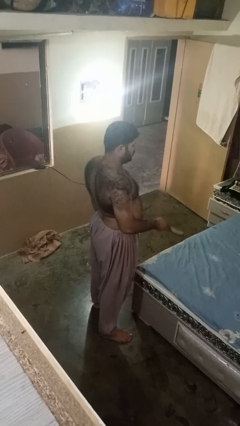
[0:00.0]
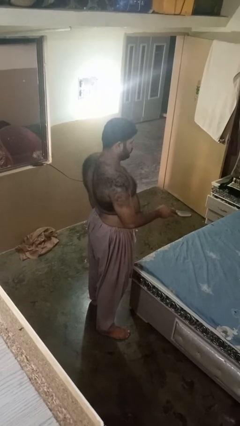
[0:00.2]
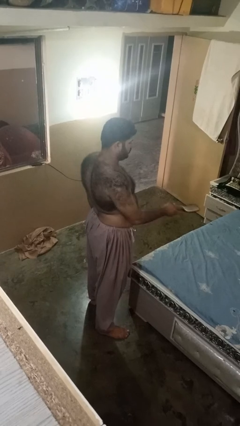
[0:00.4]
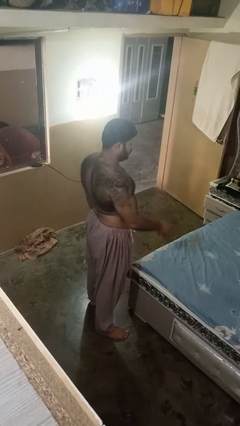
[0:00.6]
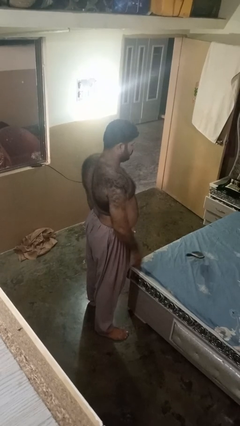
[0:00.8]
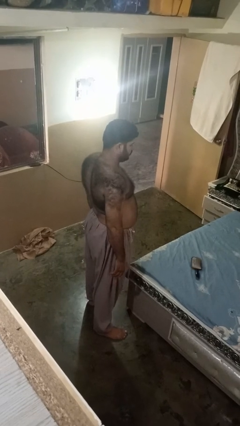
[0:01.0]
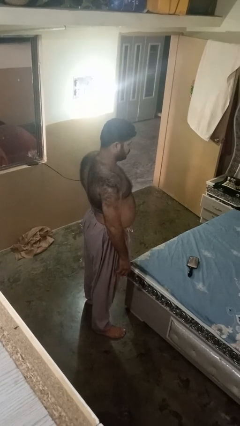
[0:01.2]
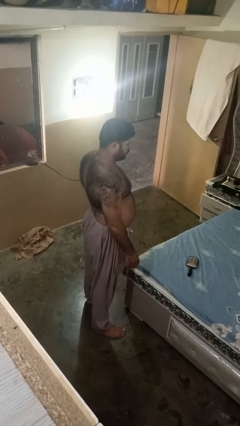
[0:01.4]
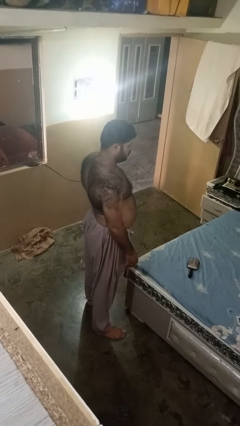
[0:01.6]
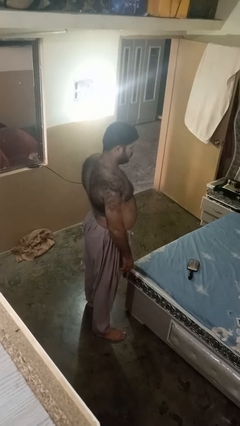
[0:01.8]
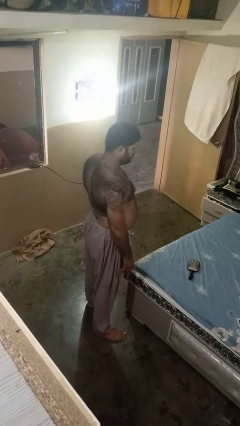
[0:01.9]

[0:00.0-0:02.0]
person throws object on bed

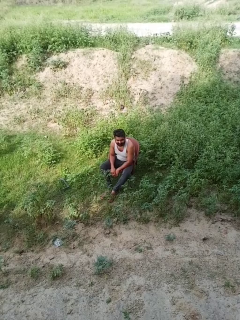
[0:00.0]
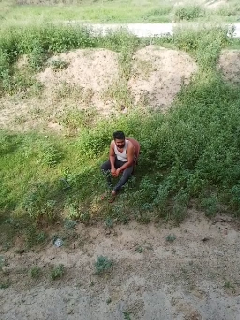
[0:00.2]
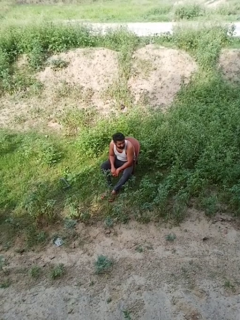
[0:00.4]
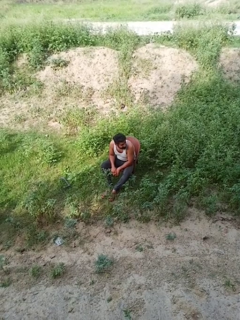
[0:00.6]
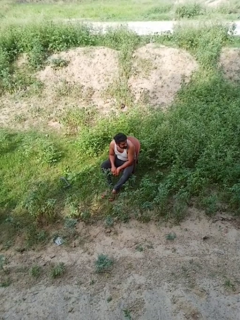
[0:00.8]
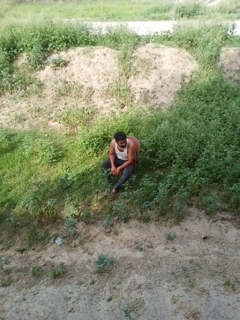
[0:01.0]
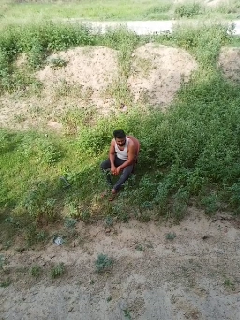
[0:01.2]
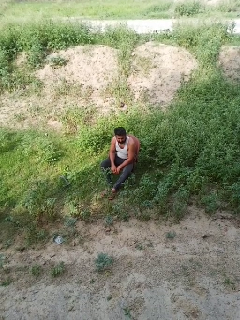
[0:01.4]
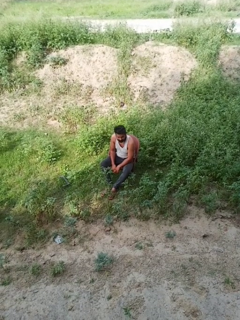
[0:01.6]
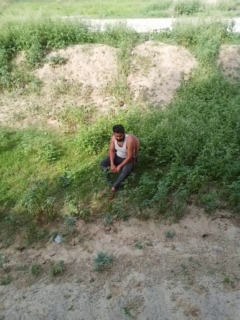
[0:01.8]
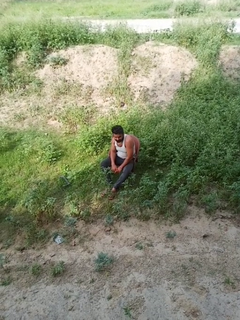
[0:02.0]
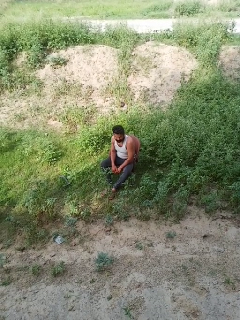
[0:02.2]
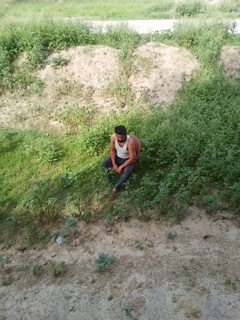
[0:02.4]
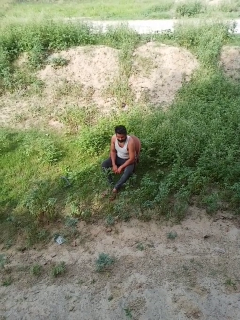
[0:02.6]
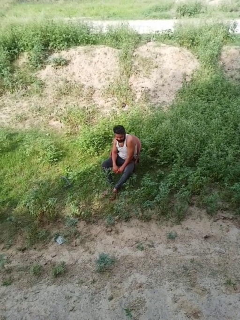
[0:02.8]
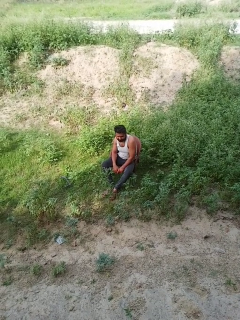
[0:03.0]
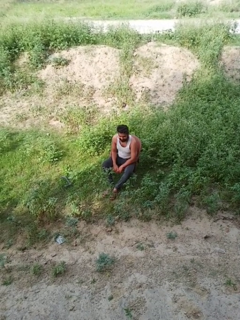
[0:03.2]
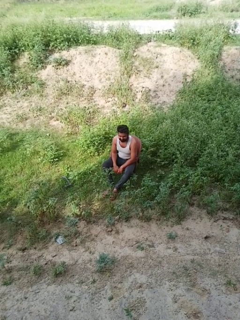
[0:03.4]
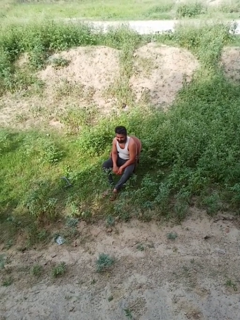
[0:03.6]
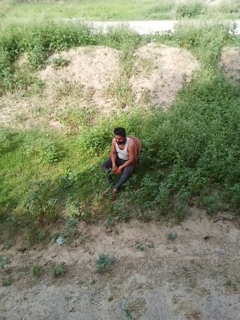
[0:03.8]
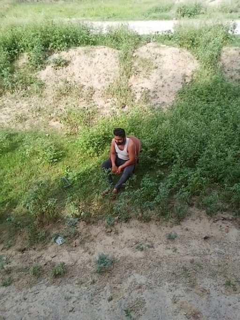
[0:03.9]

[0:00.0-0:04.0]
person shrugs

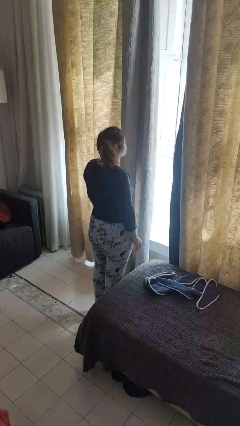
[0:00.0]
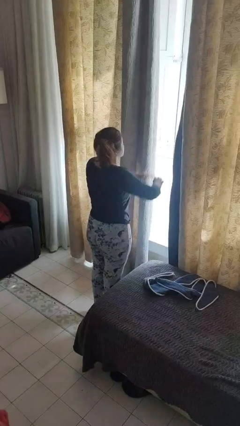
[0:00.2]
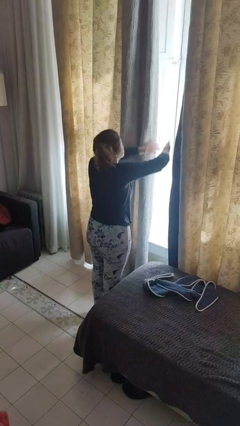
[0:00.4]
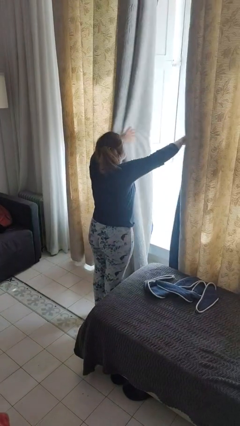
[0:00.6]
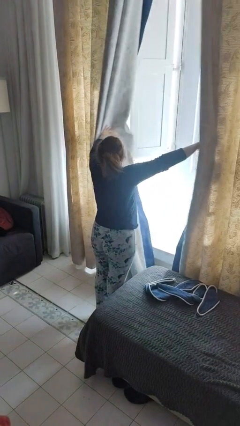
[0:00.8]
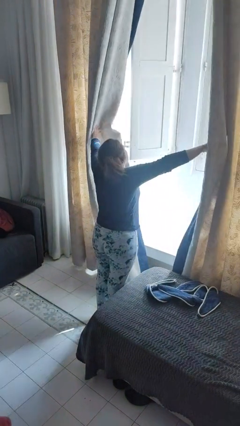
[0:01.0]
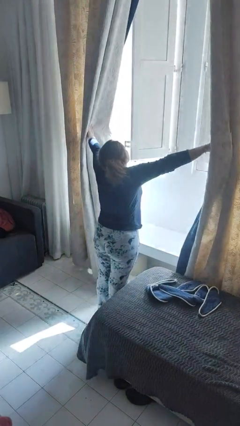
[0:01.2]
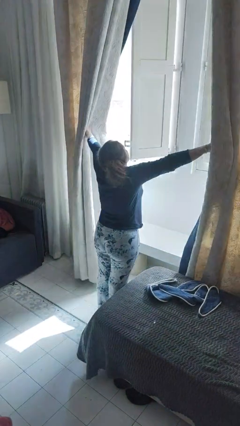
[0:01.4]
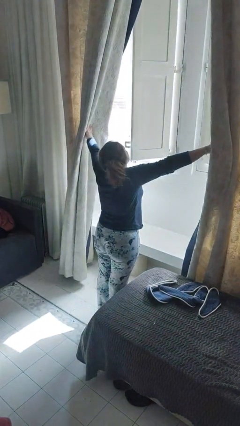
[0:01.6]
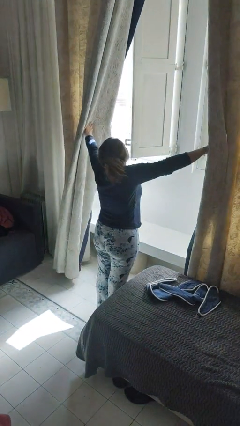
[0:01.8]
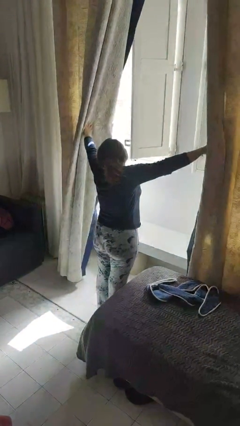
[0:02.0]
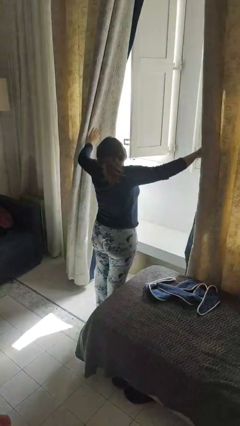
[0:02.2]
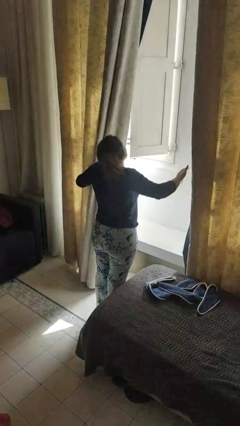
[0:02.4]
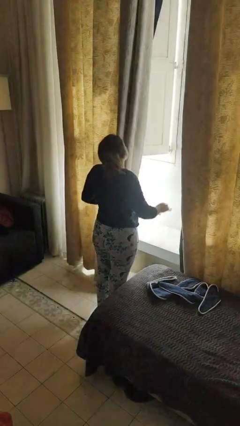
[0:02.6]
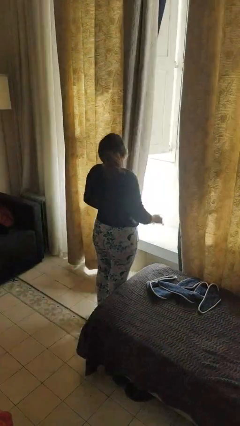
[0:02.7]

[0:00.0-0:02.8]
person opens curtains

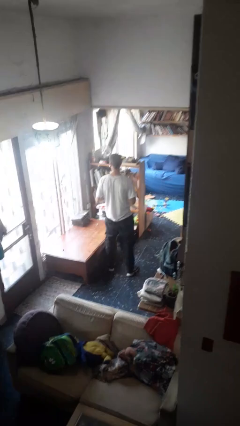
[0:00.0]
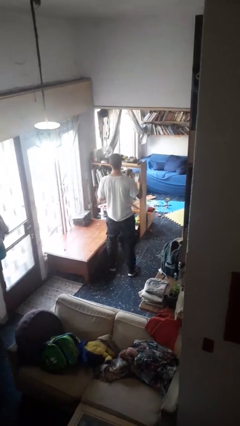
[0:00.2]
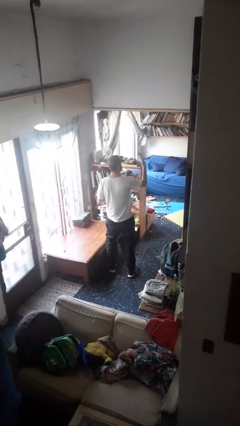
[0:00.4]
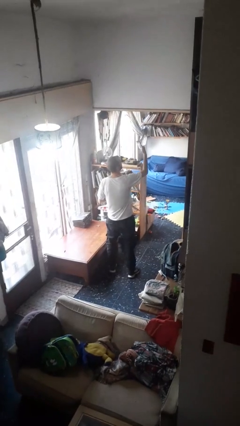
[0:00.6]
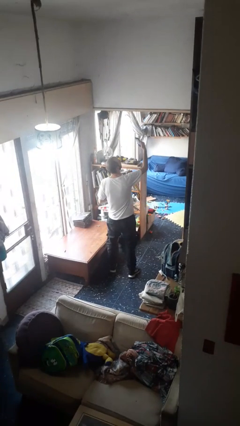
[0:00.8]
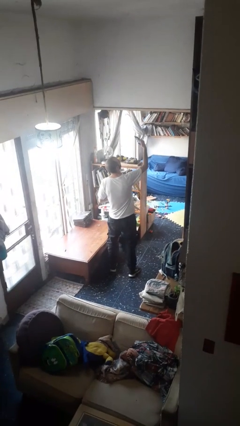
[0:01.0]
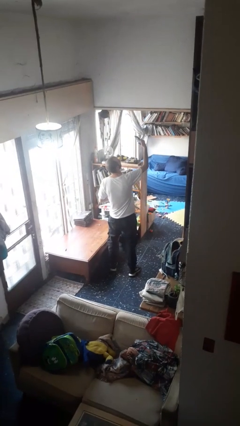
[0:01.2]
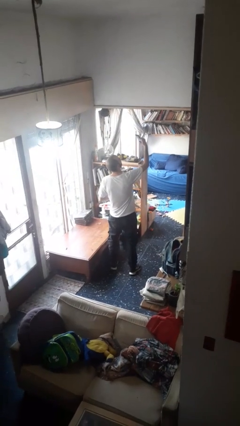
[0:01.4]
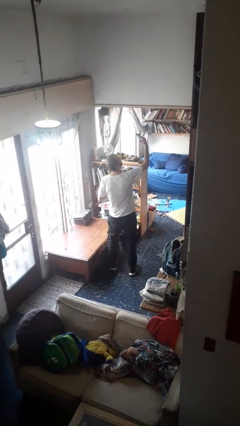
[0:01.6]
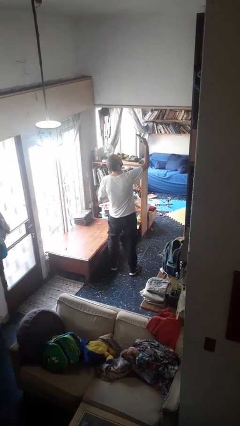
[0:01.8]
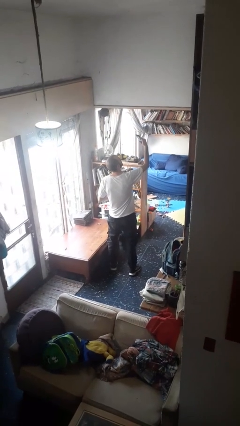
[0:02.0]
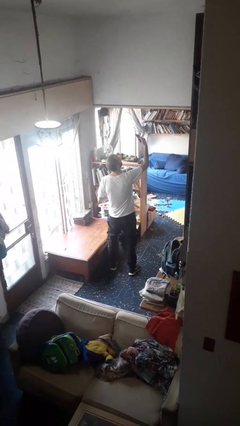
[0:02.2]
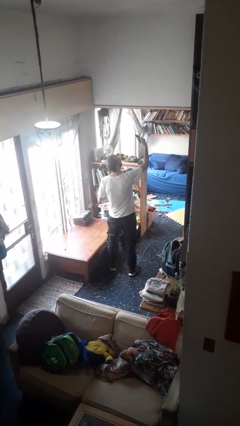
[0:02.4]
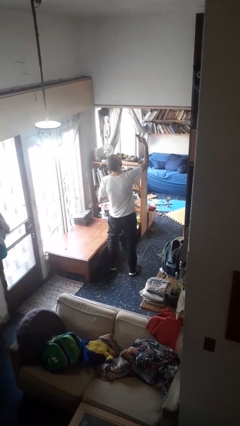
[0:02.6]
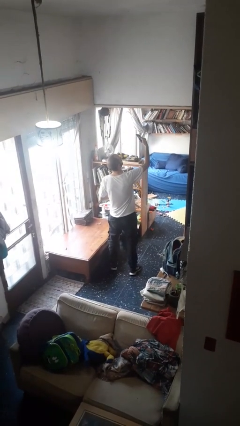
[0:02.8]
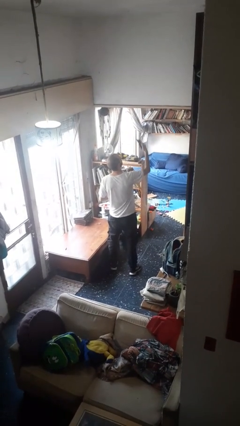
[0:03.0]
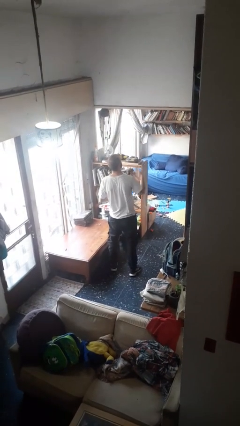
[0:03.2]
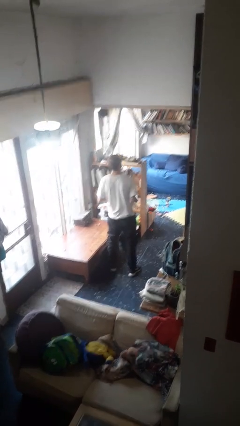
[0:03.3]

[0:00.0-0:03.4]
person takes selfie

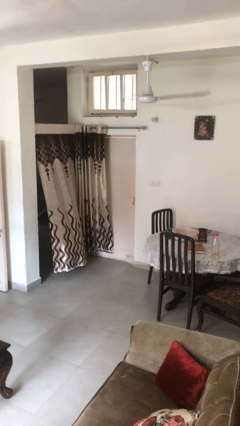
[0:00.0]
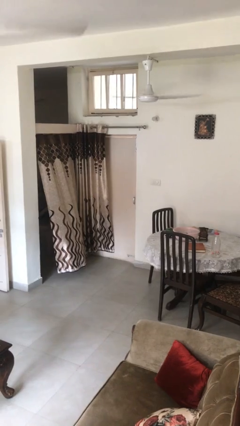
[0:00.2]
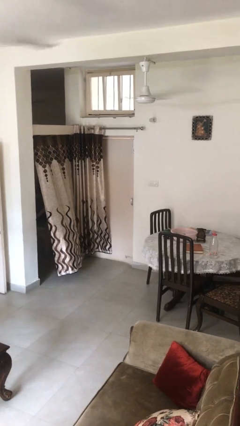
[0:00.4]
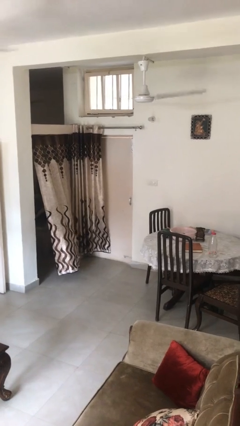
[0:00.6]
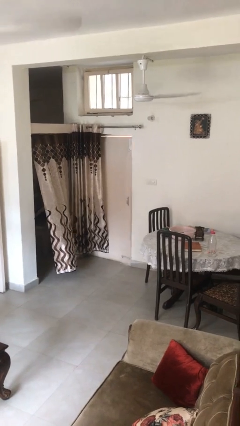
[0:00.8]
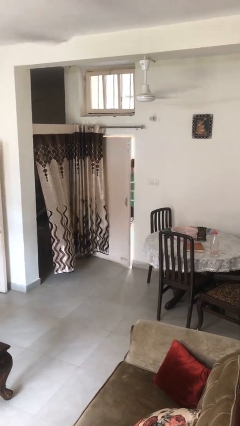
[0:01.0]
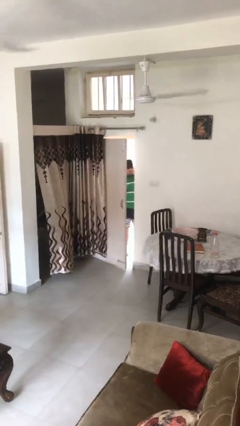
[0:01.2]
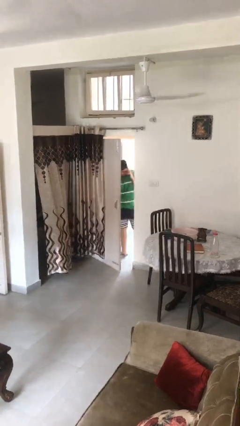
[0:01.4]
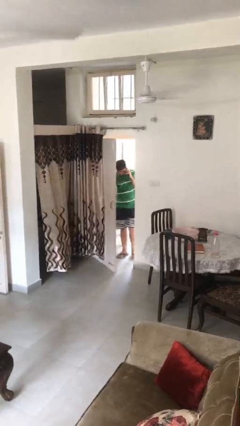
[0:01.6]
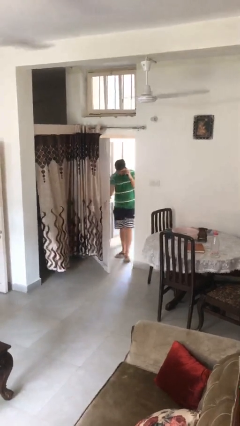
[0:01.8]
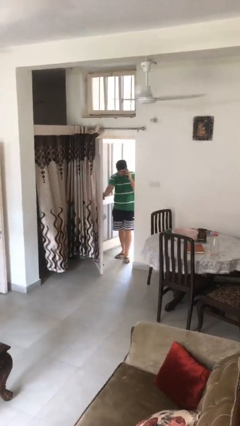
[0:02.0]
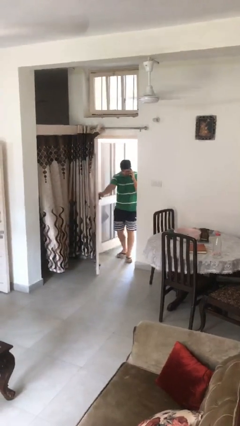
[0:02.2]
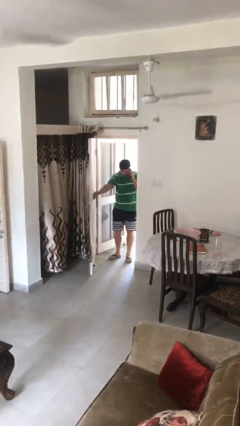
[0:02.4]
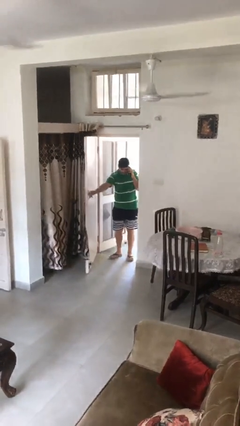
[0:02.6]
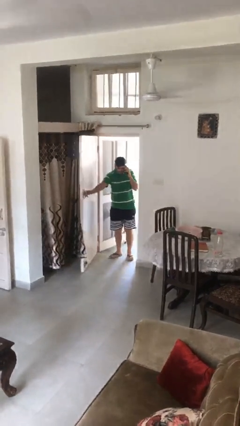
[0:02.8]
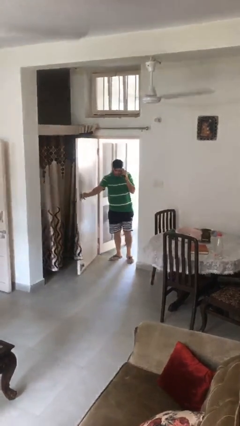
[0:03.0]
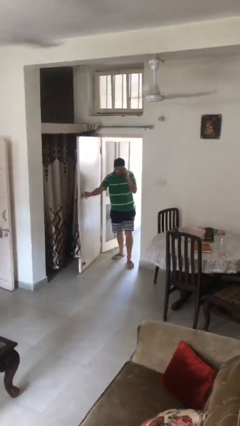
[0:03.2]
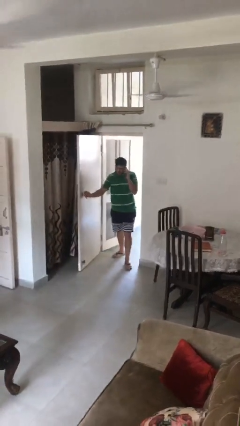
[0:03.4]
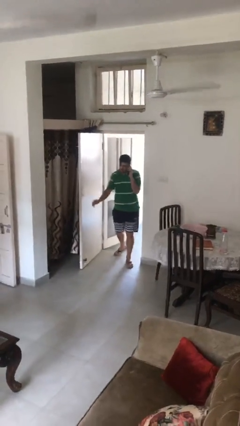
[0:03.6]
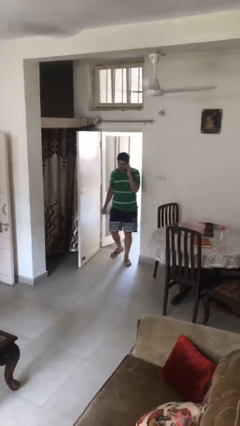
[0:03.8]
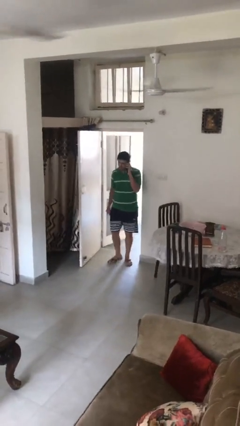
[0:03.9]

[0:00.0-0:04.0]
person opens facility door

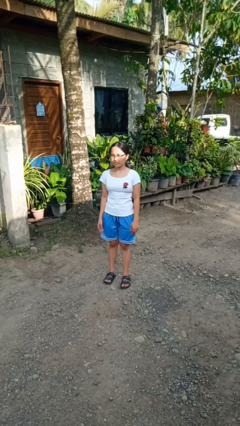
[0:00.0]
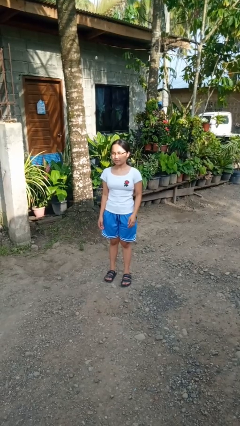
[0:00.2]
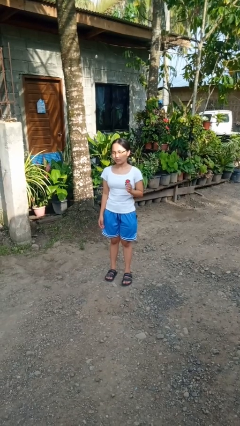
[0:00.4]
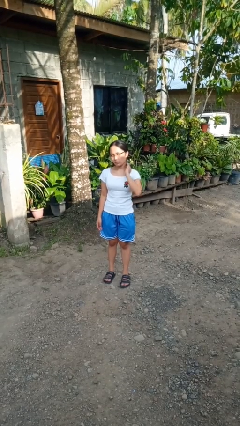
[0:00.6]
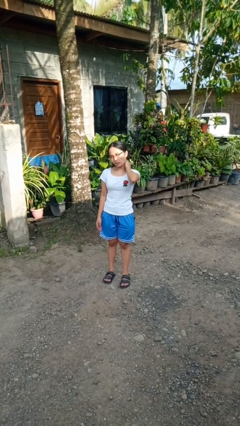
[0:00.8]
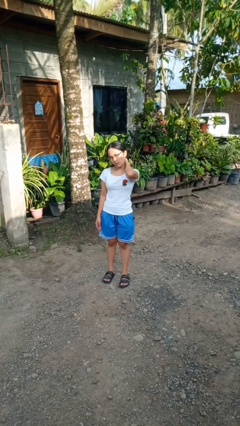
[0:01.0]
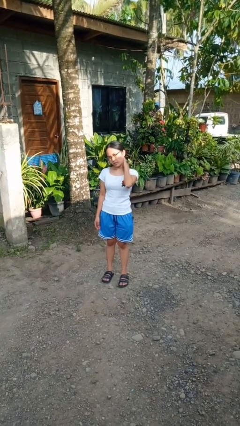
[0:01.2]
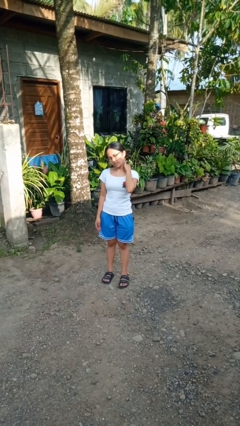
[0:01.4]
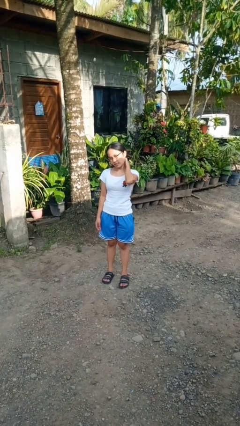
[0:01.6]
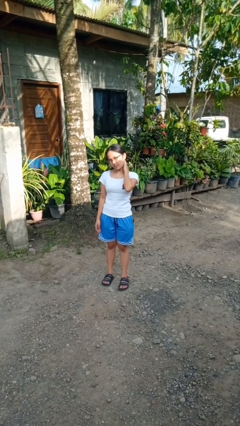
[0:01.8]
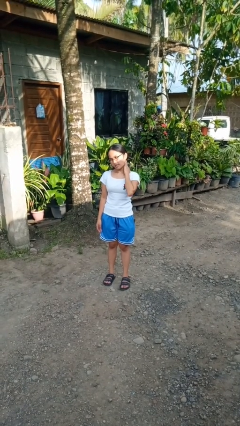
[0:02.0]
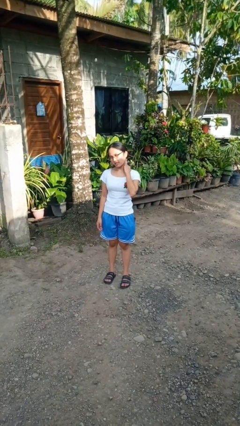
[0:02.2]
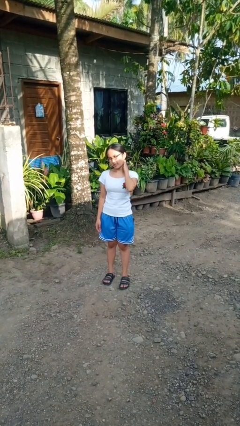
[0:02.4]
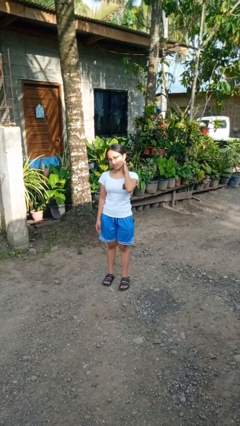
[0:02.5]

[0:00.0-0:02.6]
person rubs neck
